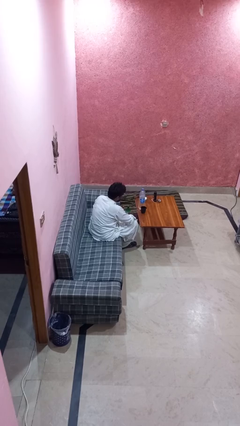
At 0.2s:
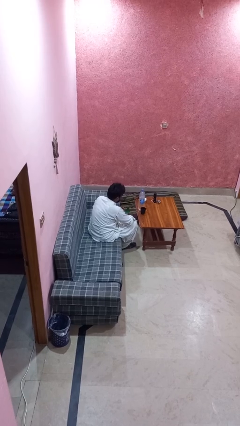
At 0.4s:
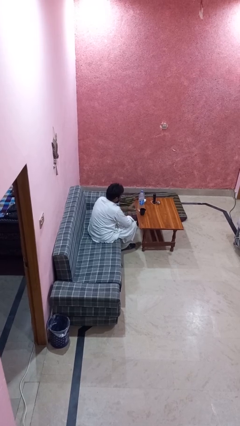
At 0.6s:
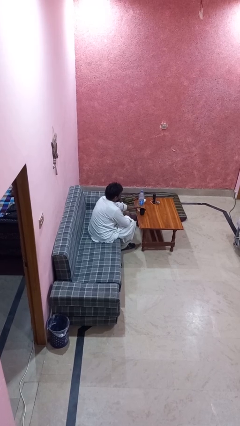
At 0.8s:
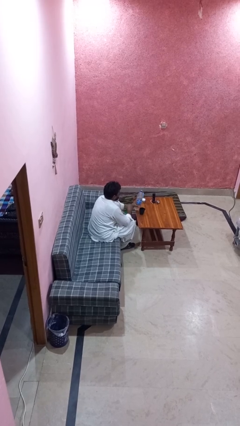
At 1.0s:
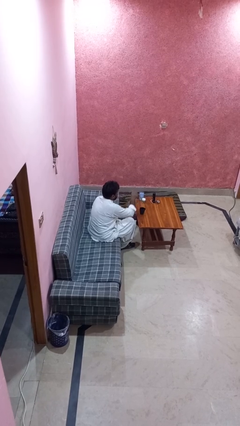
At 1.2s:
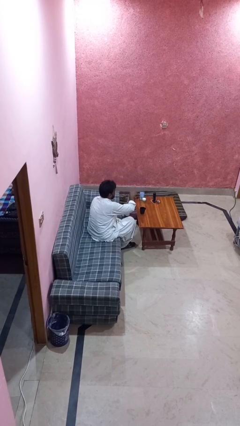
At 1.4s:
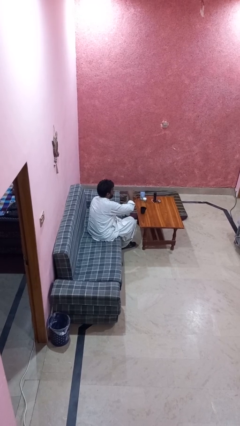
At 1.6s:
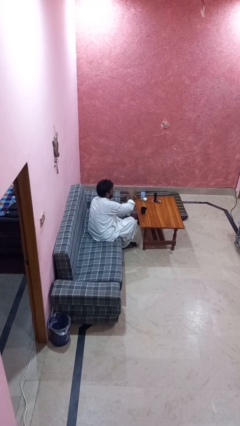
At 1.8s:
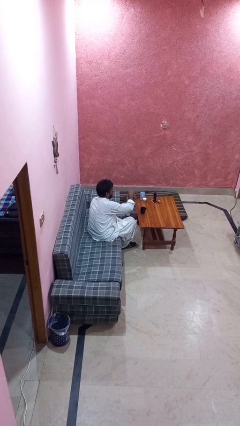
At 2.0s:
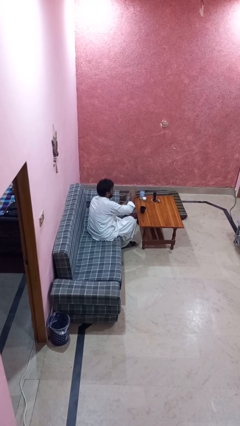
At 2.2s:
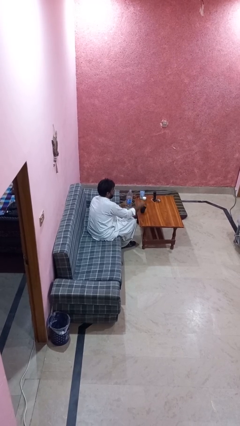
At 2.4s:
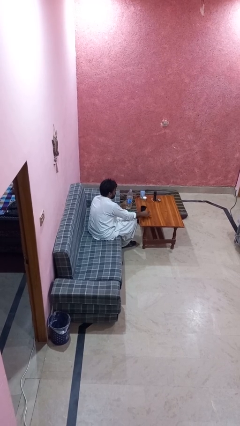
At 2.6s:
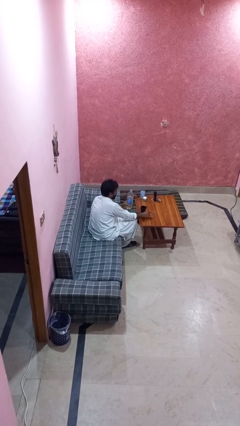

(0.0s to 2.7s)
person unscrews lid from bottle

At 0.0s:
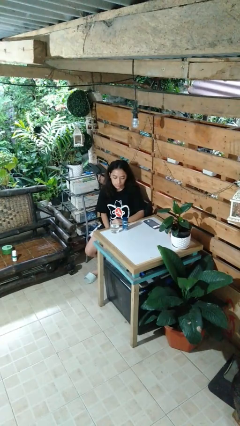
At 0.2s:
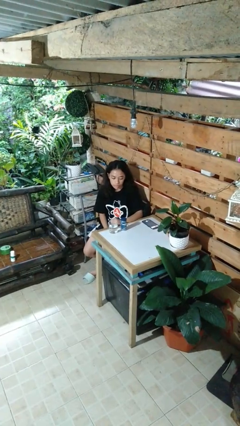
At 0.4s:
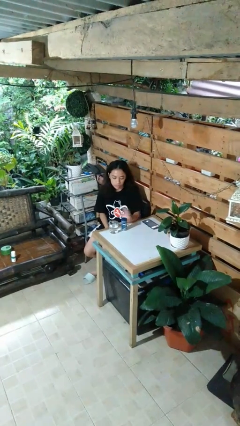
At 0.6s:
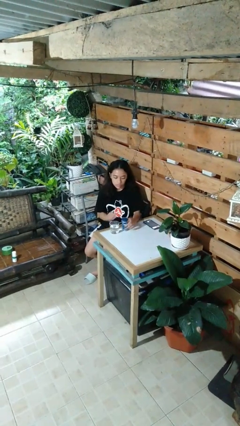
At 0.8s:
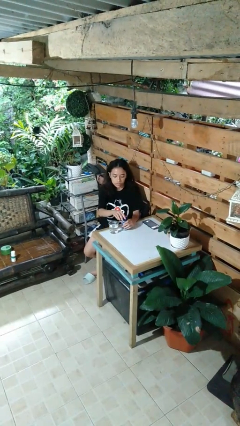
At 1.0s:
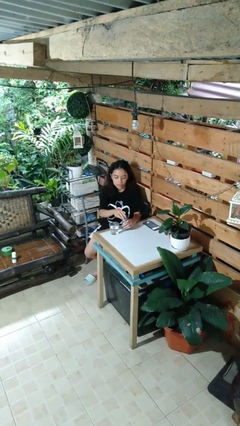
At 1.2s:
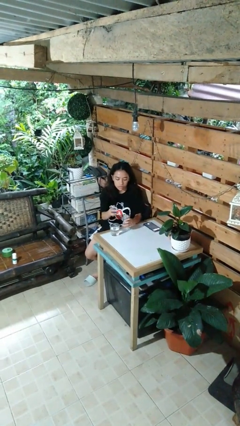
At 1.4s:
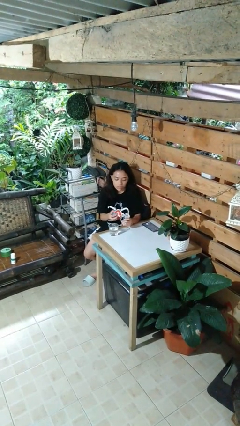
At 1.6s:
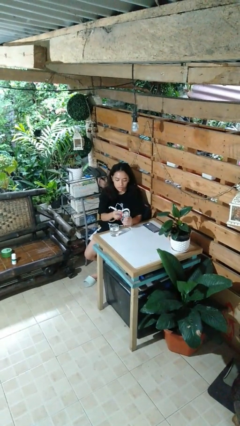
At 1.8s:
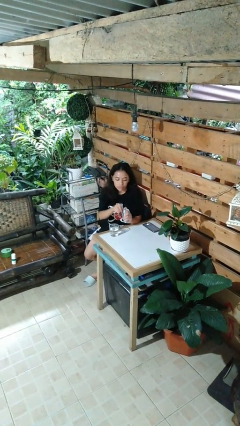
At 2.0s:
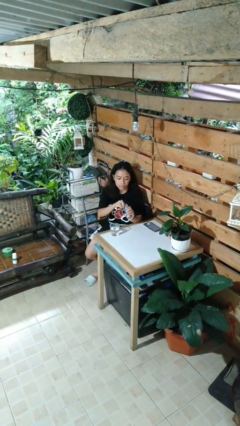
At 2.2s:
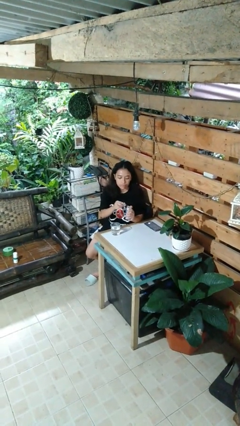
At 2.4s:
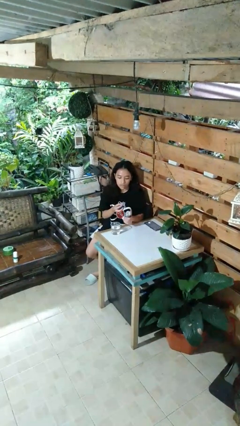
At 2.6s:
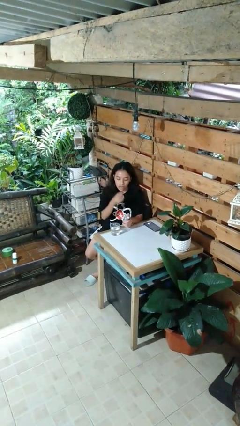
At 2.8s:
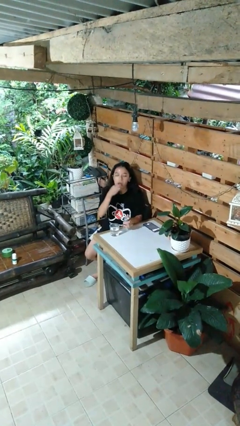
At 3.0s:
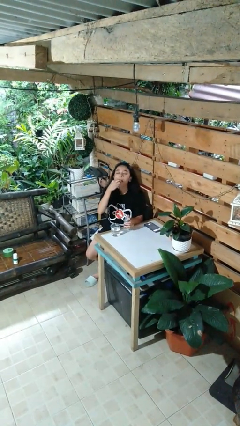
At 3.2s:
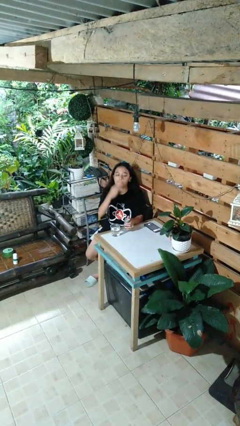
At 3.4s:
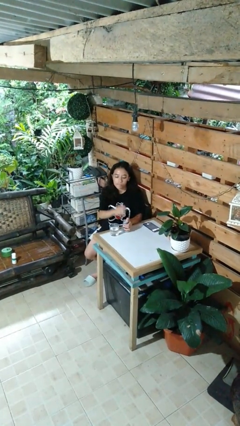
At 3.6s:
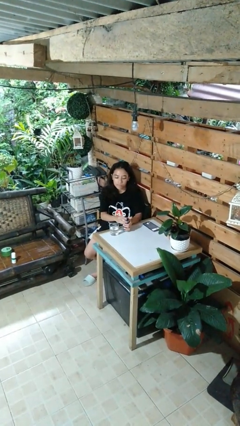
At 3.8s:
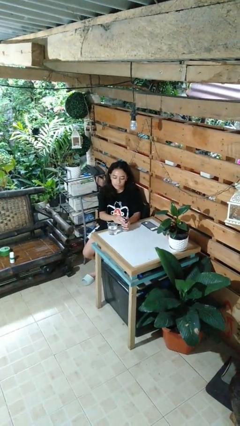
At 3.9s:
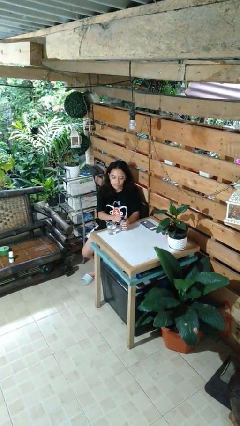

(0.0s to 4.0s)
person takes medicine pills

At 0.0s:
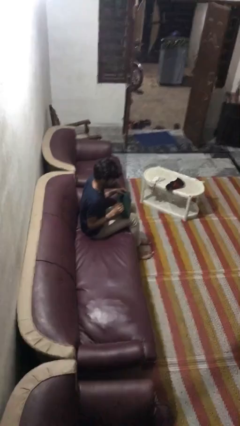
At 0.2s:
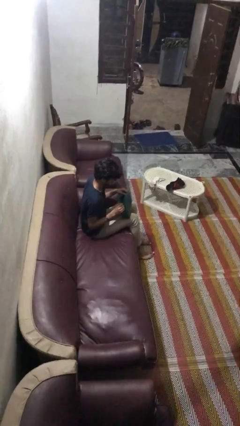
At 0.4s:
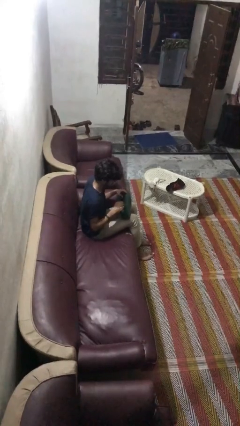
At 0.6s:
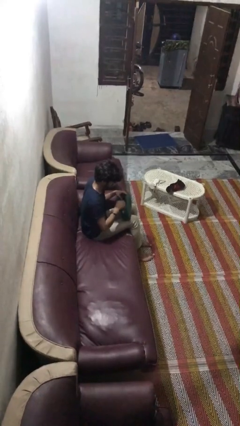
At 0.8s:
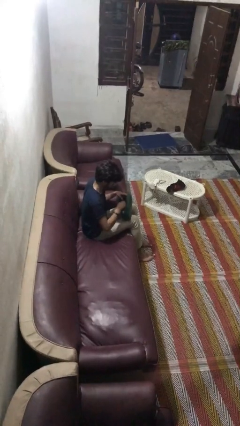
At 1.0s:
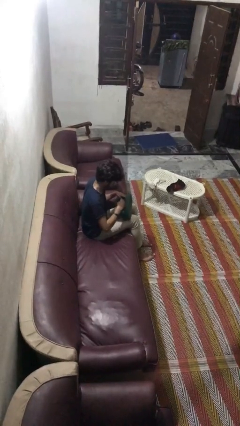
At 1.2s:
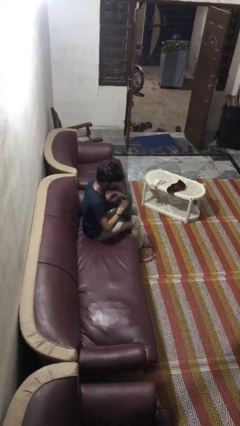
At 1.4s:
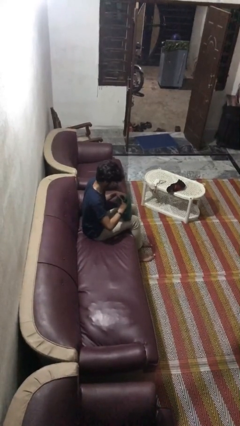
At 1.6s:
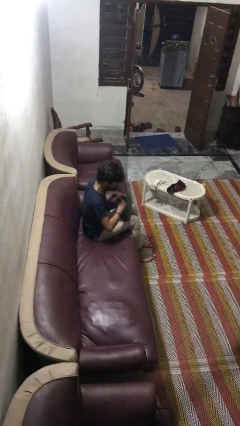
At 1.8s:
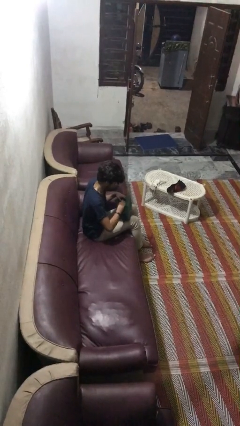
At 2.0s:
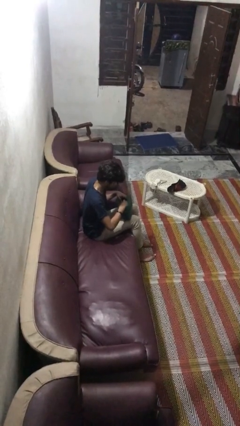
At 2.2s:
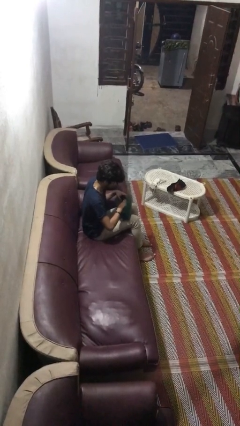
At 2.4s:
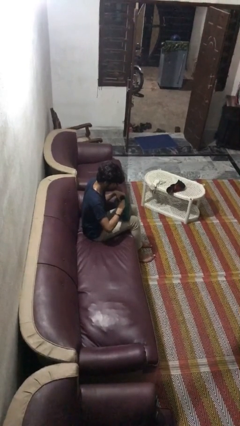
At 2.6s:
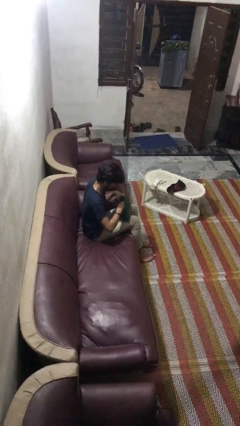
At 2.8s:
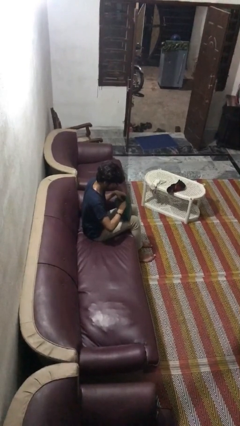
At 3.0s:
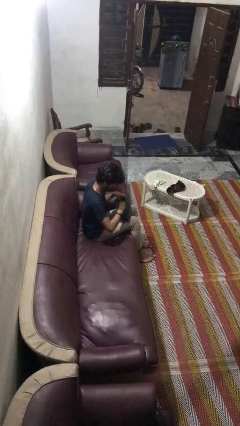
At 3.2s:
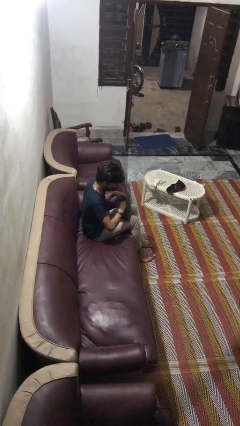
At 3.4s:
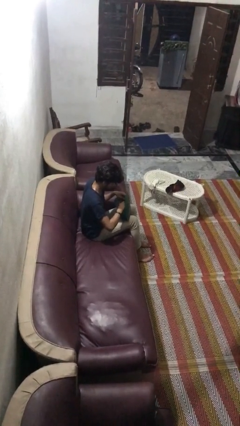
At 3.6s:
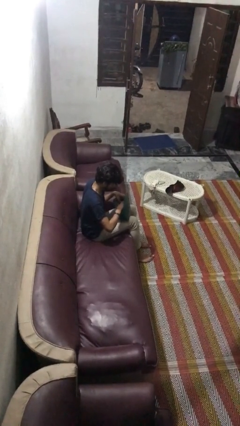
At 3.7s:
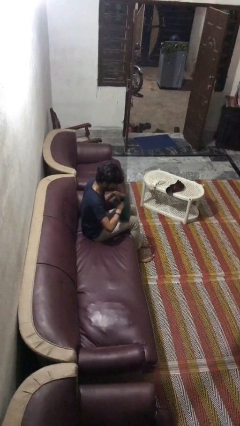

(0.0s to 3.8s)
person searches in purse

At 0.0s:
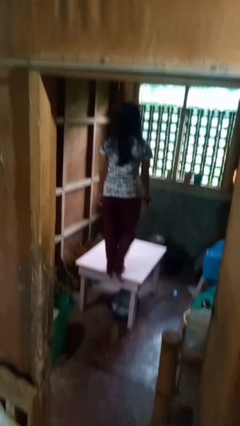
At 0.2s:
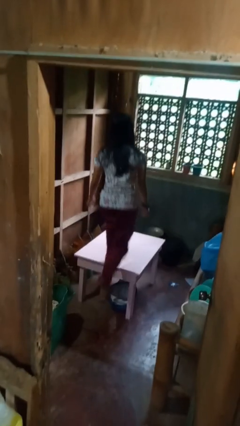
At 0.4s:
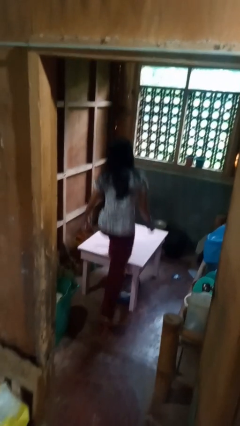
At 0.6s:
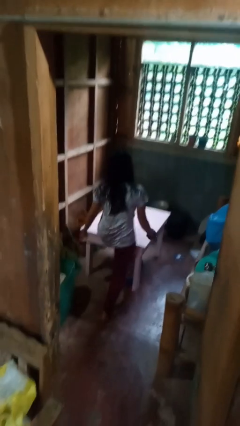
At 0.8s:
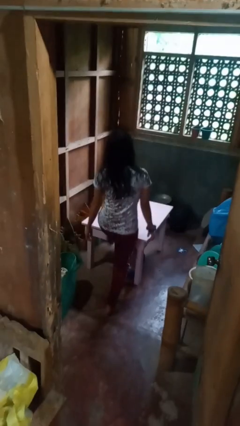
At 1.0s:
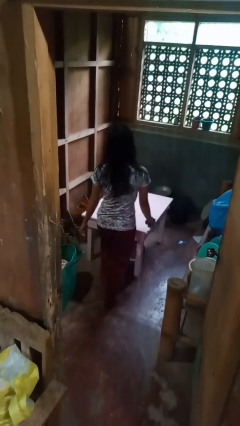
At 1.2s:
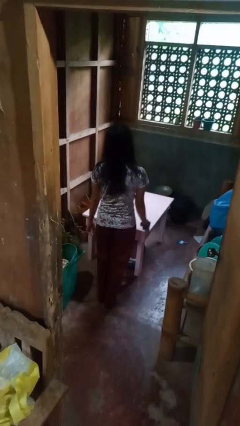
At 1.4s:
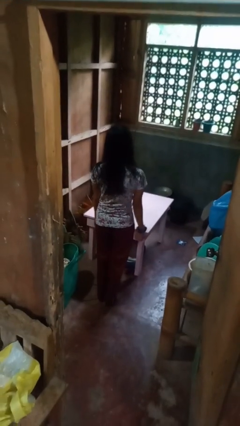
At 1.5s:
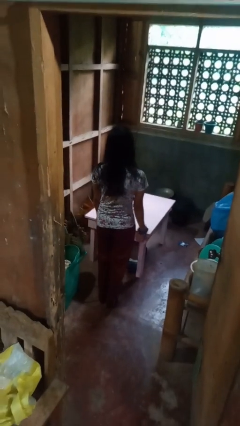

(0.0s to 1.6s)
person climbs off table

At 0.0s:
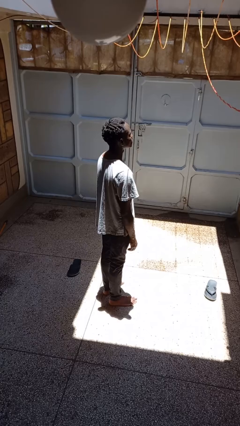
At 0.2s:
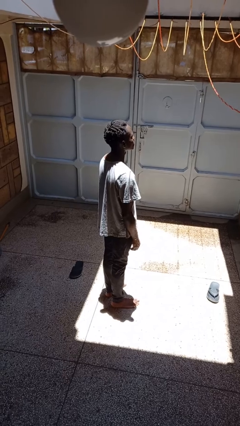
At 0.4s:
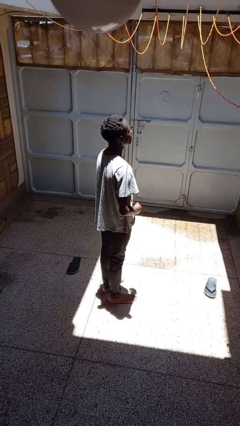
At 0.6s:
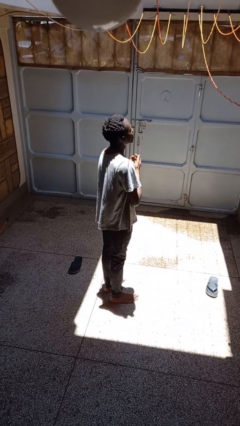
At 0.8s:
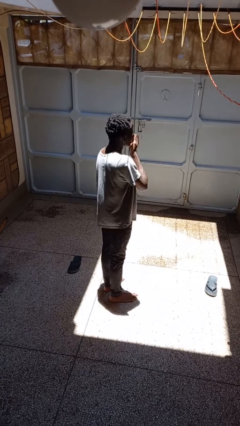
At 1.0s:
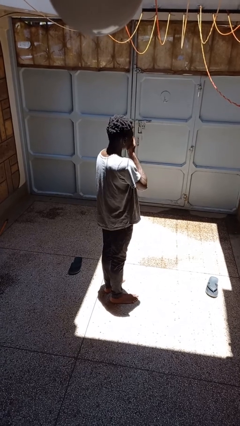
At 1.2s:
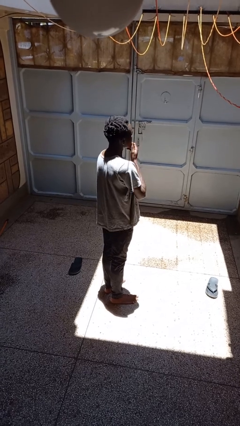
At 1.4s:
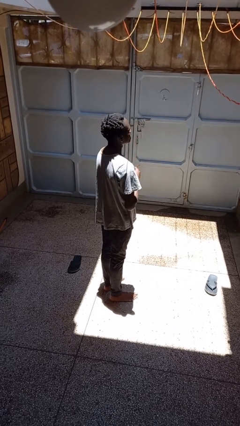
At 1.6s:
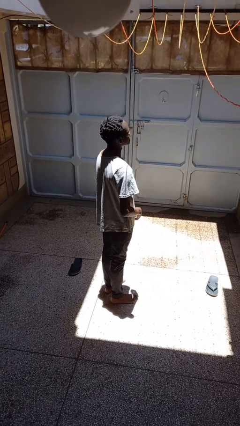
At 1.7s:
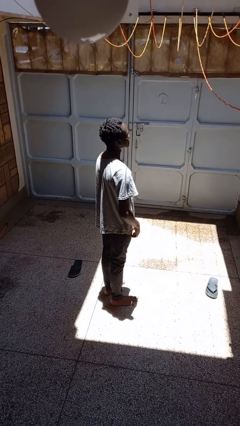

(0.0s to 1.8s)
person sneezes into hand

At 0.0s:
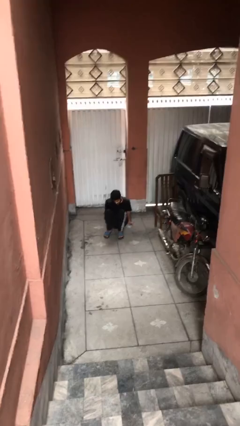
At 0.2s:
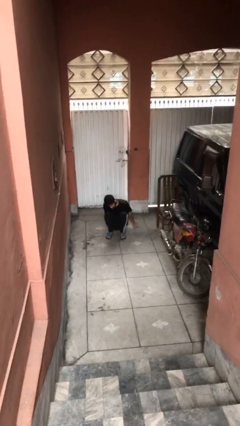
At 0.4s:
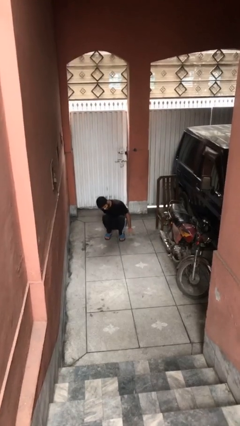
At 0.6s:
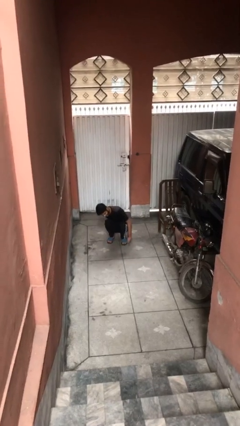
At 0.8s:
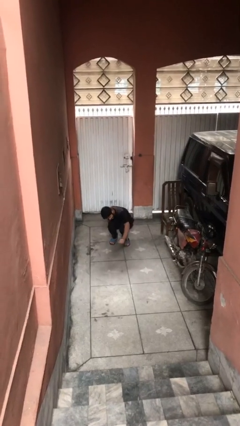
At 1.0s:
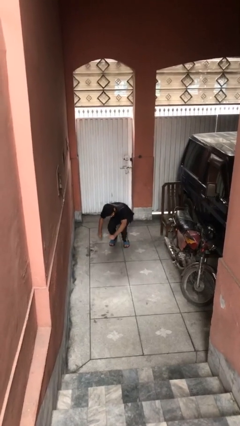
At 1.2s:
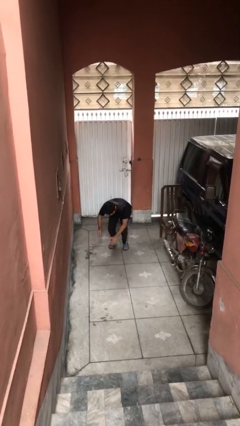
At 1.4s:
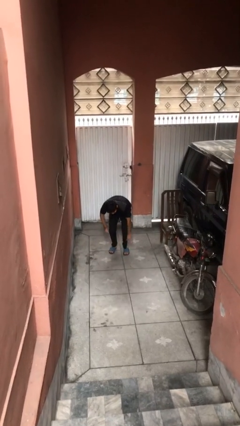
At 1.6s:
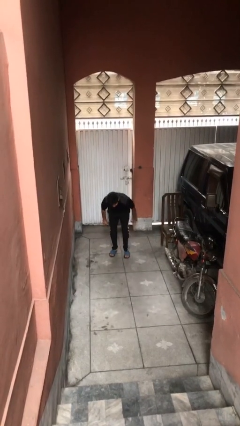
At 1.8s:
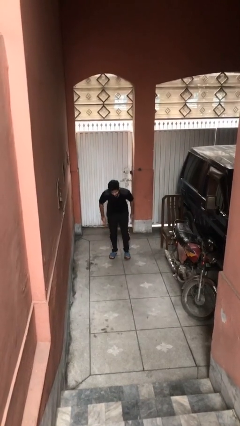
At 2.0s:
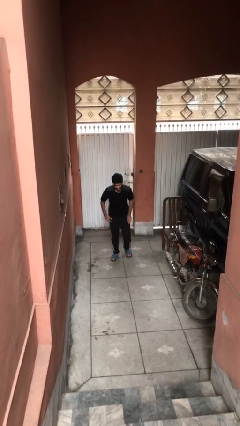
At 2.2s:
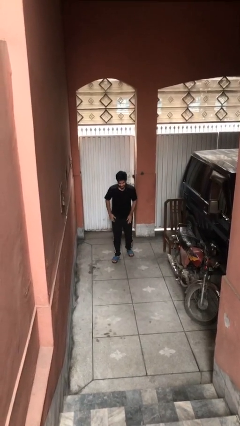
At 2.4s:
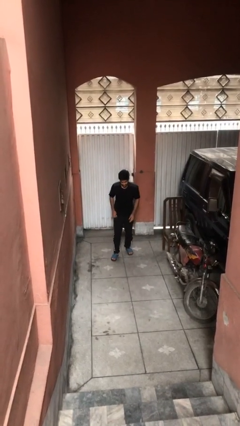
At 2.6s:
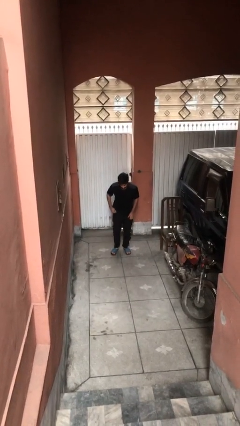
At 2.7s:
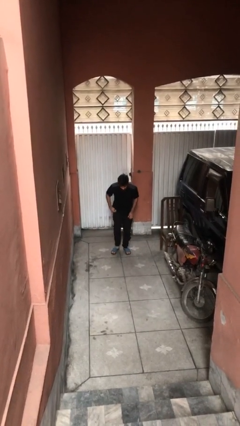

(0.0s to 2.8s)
person stands up

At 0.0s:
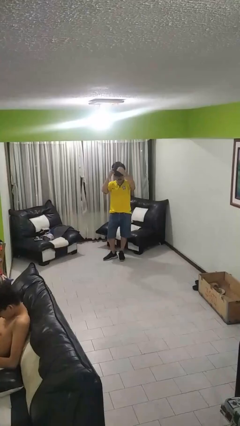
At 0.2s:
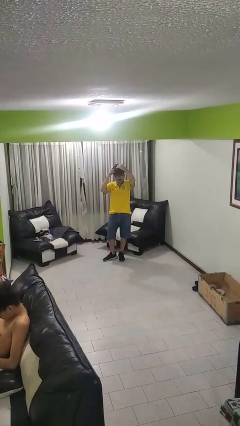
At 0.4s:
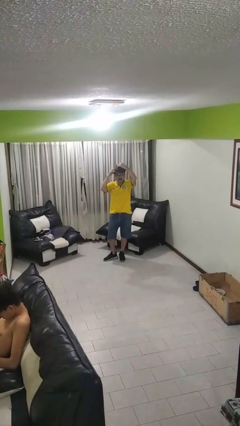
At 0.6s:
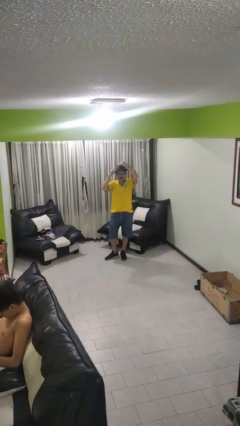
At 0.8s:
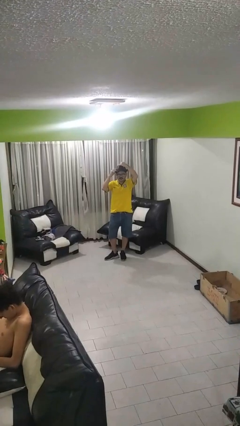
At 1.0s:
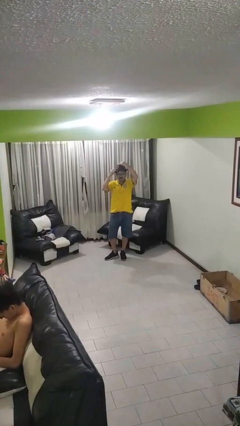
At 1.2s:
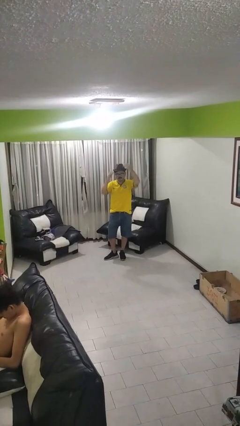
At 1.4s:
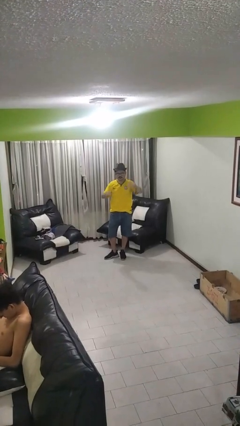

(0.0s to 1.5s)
person puts on hat
